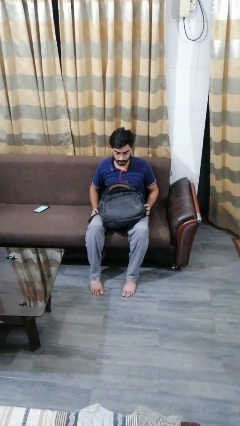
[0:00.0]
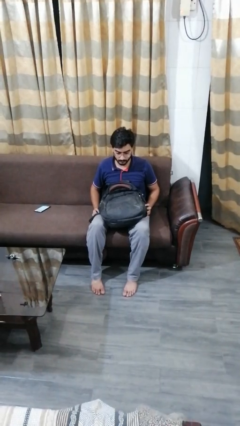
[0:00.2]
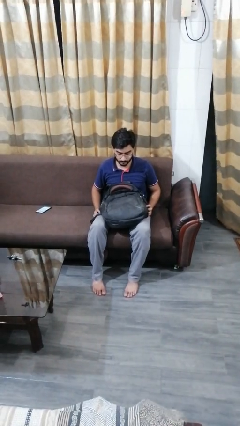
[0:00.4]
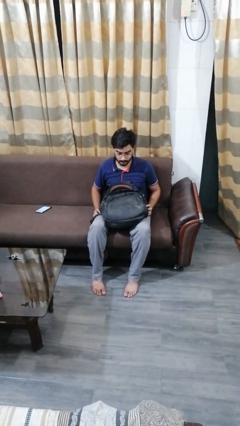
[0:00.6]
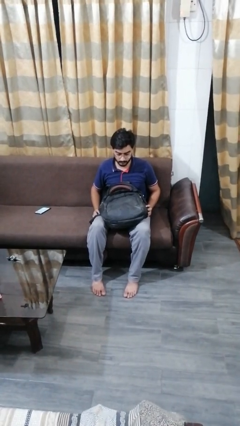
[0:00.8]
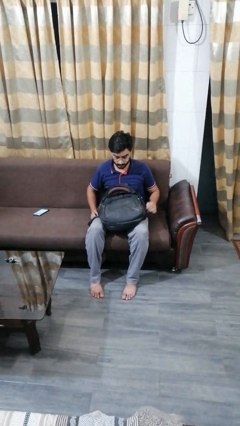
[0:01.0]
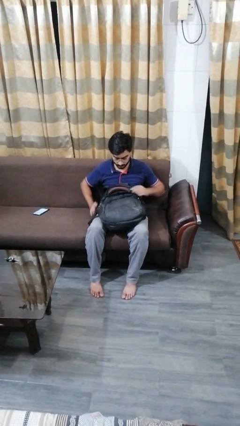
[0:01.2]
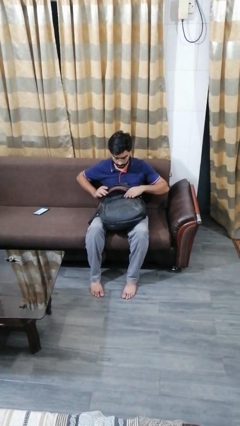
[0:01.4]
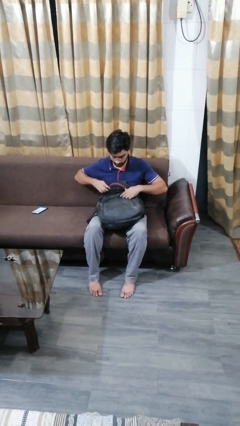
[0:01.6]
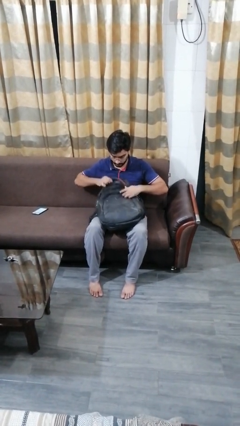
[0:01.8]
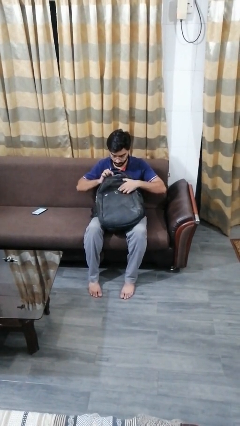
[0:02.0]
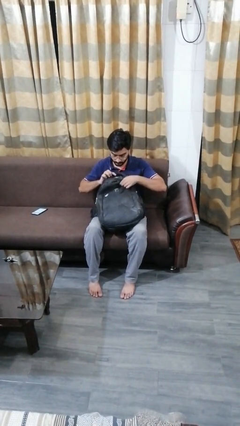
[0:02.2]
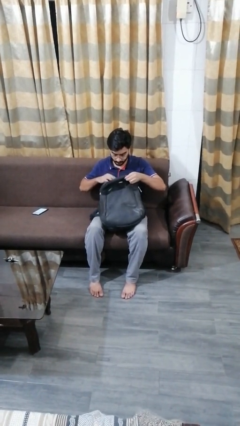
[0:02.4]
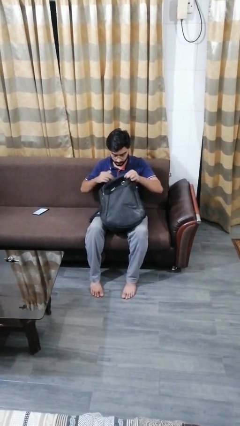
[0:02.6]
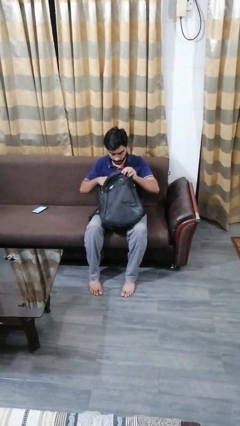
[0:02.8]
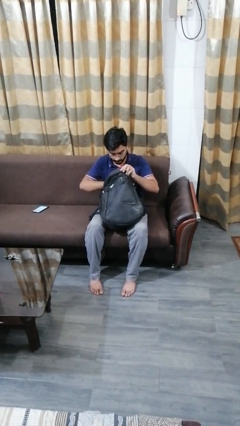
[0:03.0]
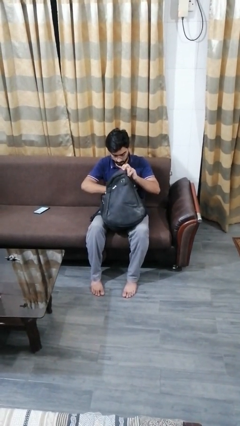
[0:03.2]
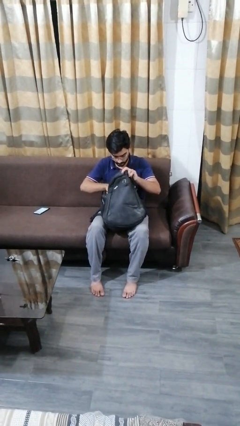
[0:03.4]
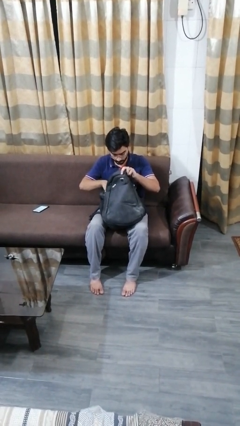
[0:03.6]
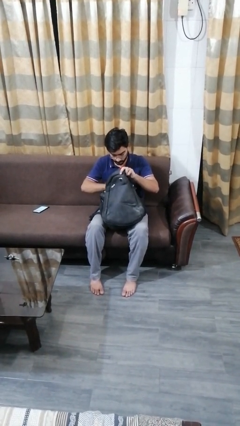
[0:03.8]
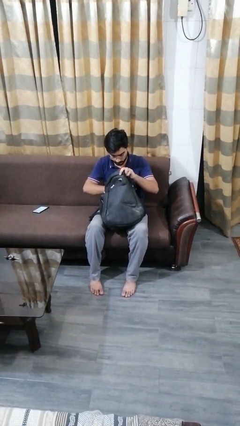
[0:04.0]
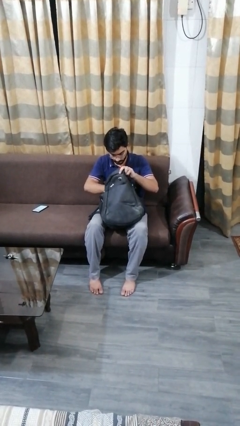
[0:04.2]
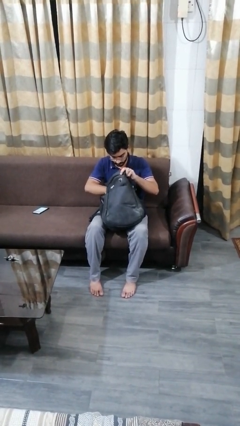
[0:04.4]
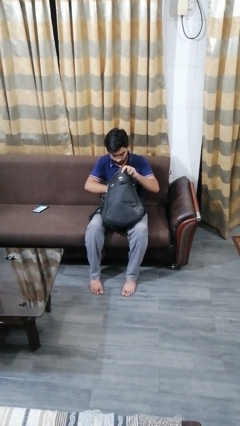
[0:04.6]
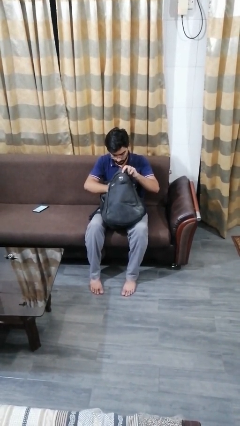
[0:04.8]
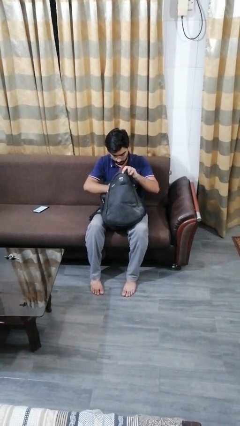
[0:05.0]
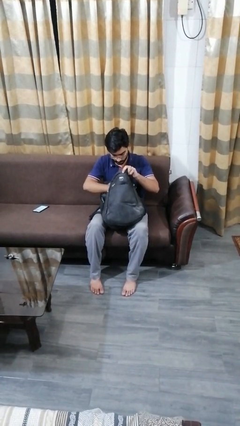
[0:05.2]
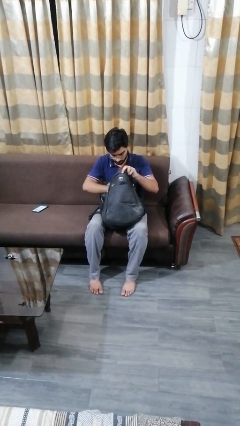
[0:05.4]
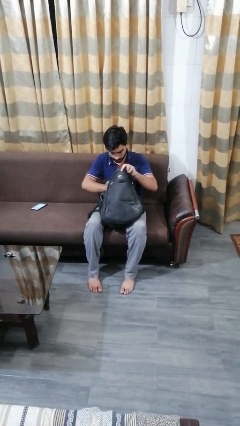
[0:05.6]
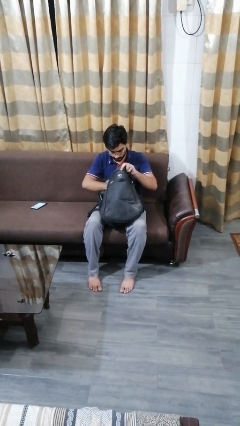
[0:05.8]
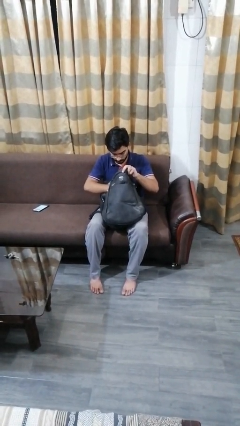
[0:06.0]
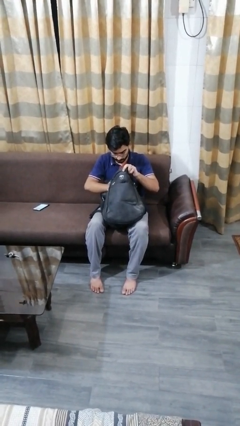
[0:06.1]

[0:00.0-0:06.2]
person searches in backpack

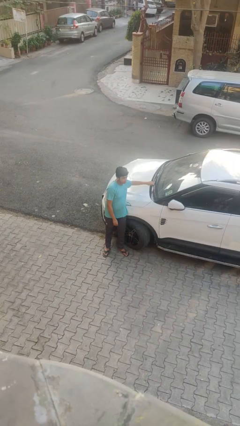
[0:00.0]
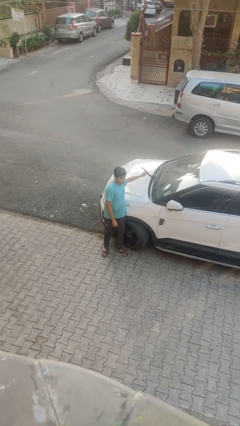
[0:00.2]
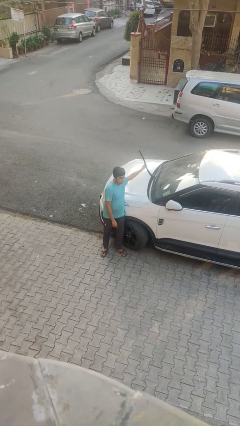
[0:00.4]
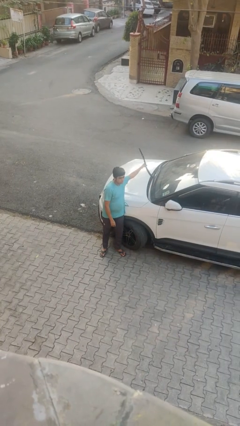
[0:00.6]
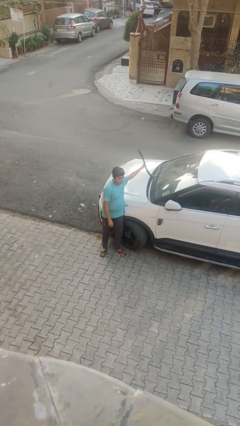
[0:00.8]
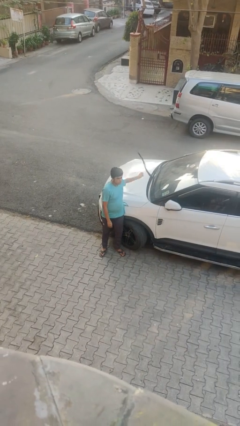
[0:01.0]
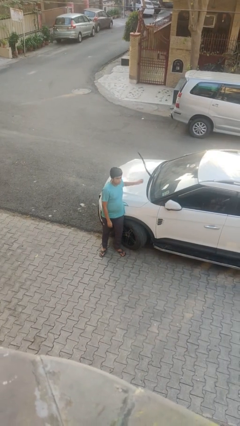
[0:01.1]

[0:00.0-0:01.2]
person flips up car wipers

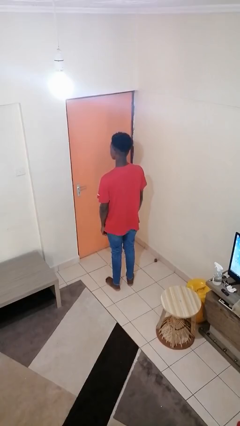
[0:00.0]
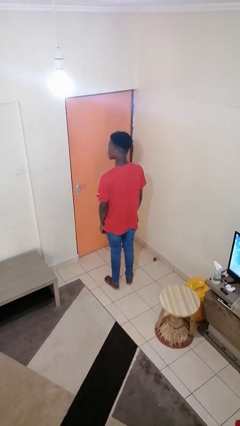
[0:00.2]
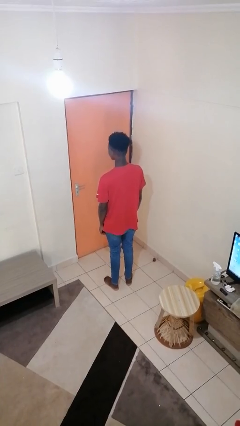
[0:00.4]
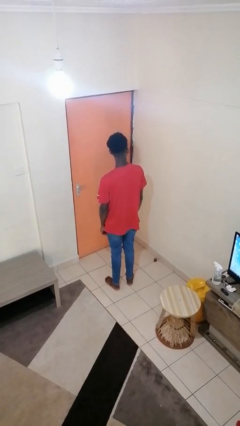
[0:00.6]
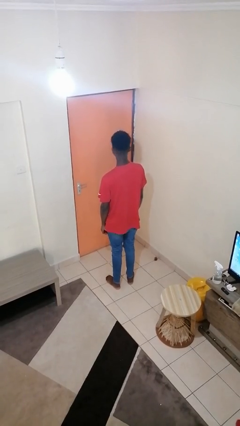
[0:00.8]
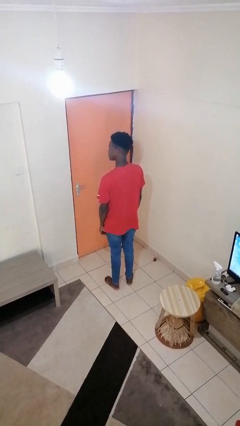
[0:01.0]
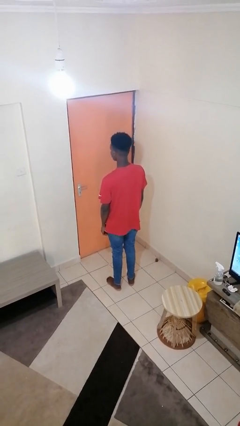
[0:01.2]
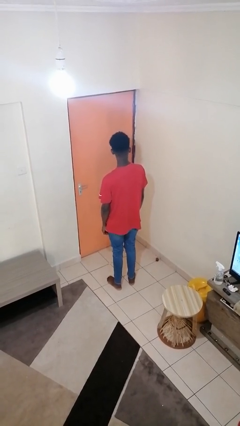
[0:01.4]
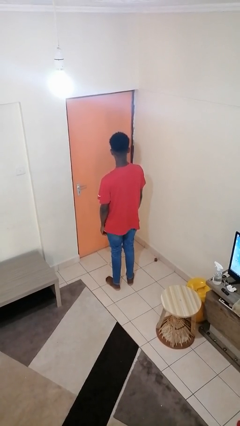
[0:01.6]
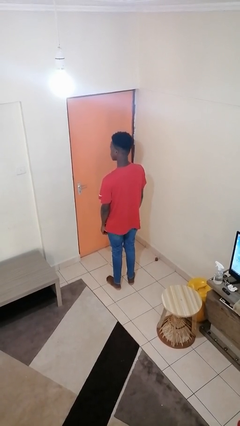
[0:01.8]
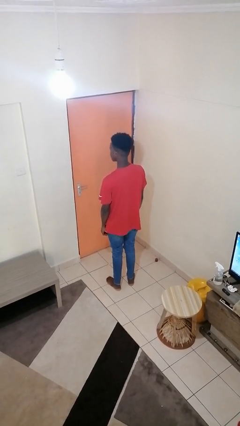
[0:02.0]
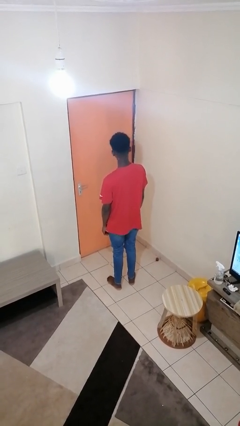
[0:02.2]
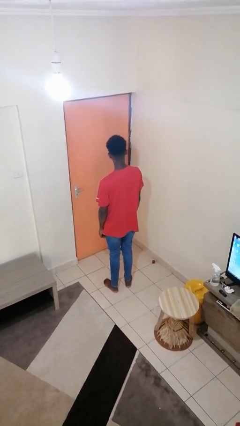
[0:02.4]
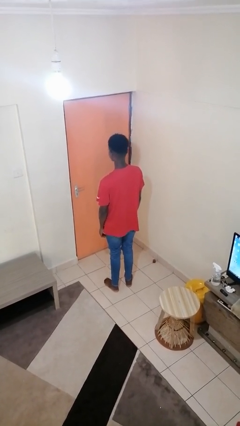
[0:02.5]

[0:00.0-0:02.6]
person shakes head

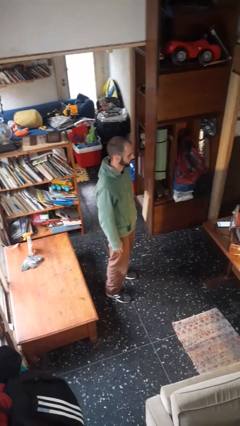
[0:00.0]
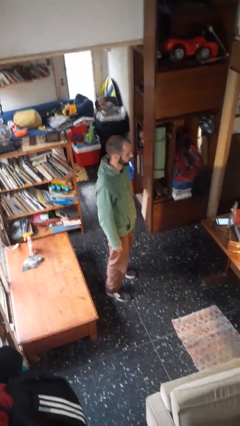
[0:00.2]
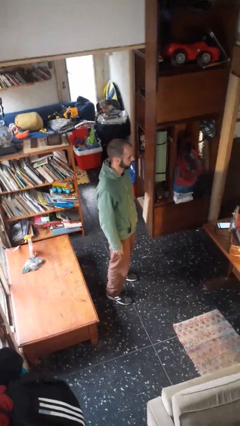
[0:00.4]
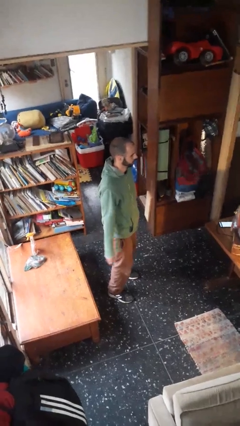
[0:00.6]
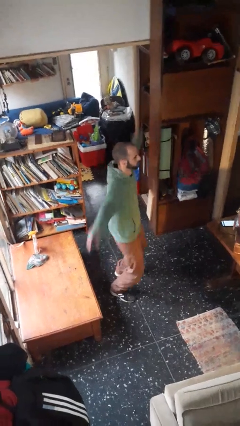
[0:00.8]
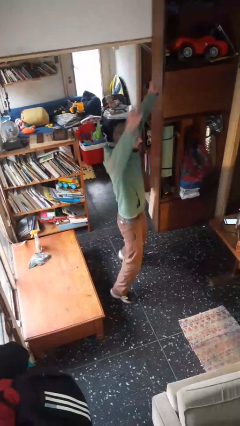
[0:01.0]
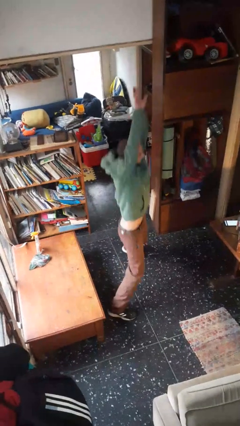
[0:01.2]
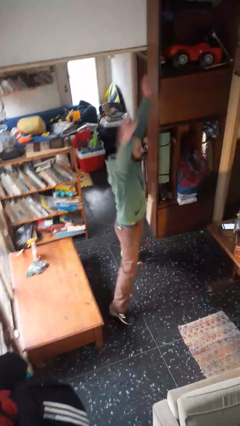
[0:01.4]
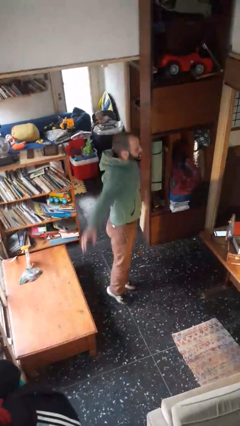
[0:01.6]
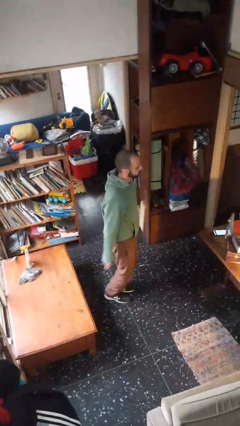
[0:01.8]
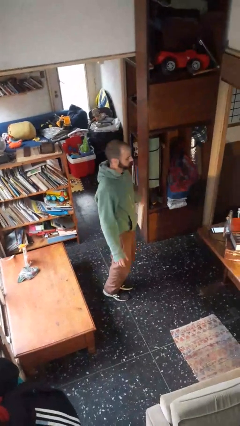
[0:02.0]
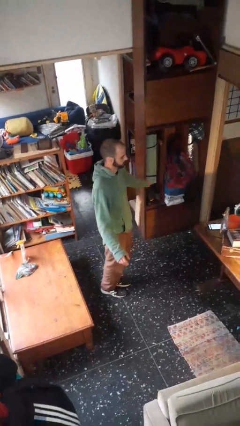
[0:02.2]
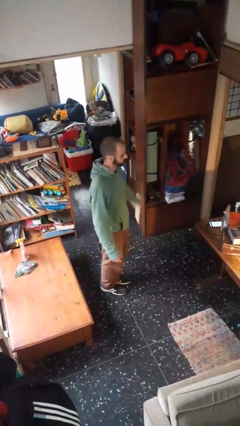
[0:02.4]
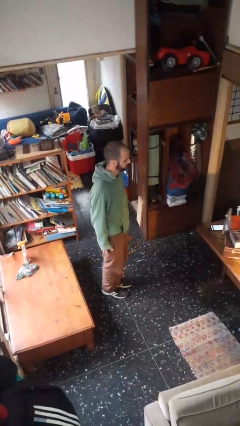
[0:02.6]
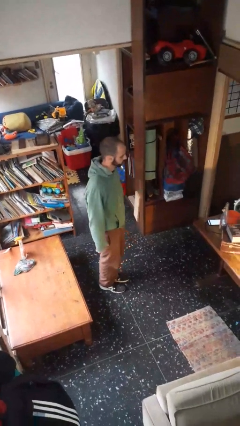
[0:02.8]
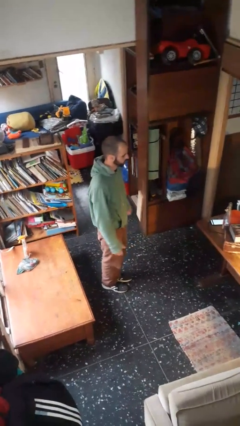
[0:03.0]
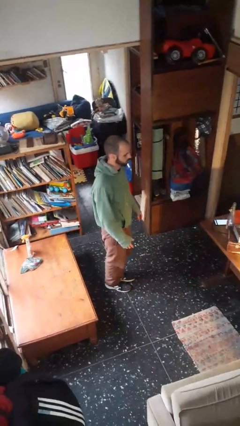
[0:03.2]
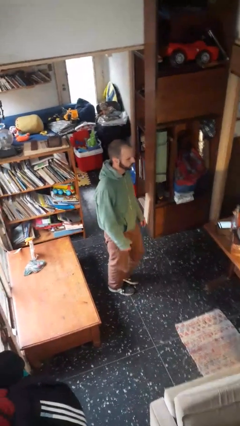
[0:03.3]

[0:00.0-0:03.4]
person exercises with jumping jacks

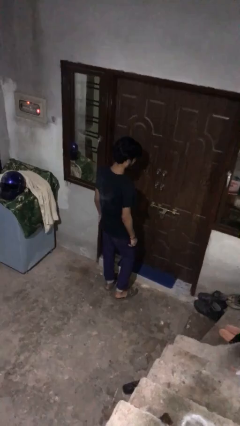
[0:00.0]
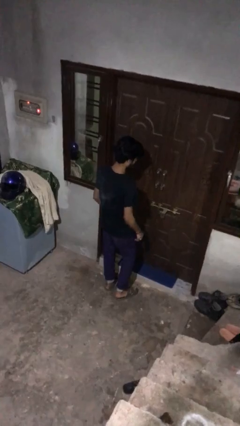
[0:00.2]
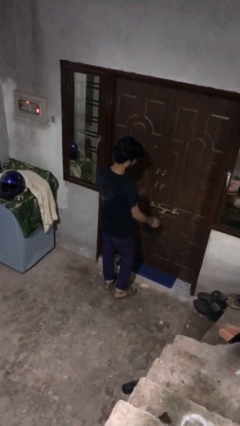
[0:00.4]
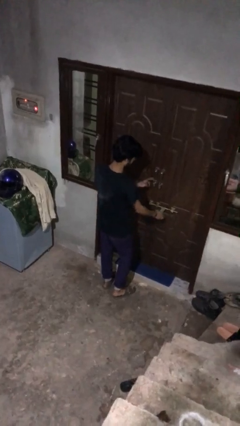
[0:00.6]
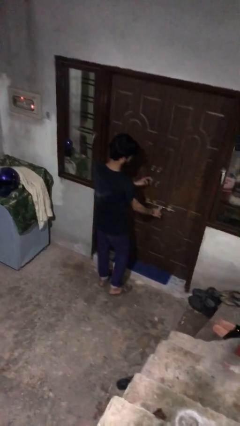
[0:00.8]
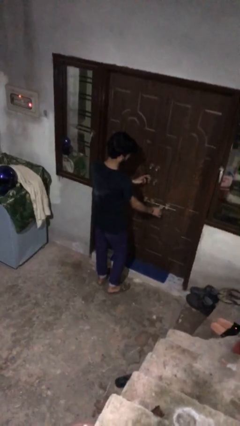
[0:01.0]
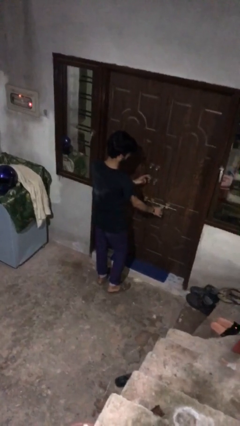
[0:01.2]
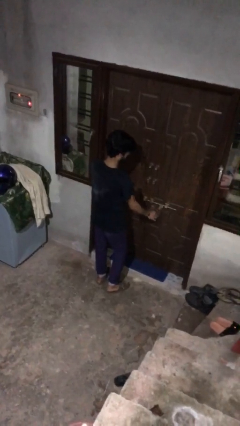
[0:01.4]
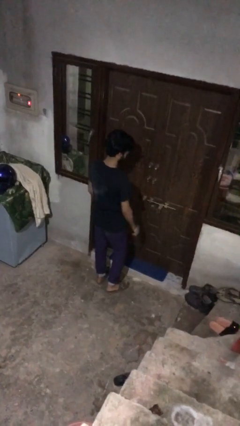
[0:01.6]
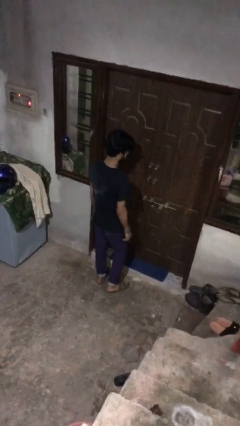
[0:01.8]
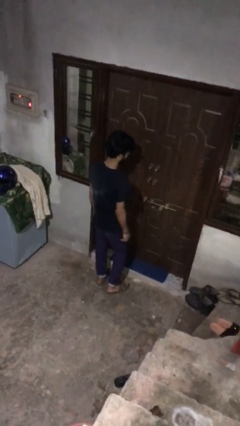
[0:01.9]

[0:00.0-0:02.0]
person unlocks door with keys

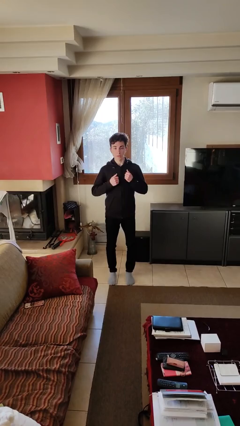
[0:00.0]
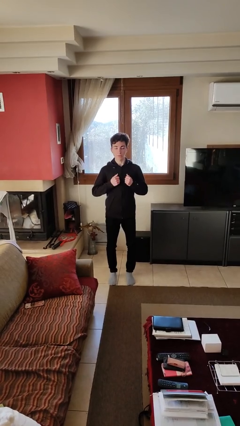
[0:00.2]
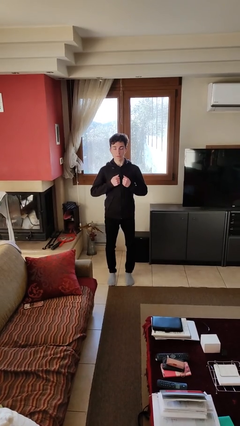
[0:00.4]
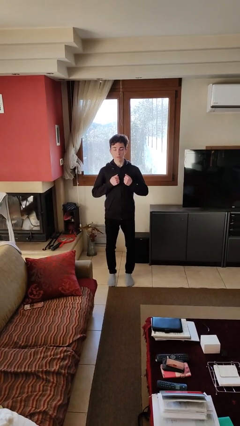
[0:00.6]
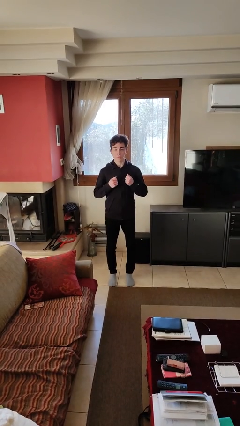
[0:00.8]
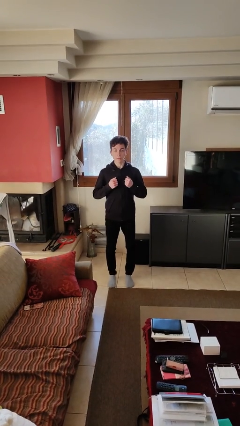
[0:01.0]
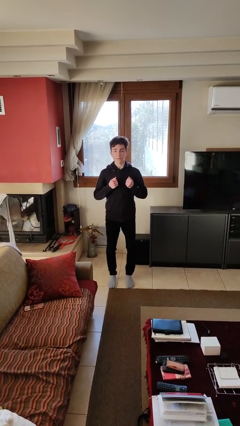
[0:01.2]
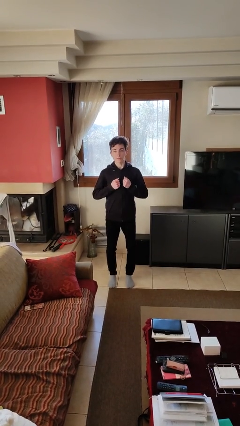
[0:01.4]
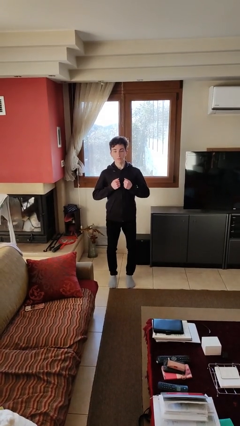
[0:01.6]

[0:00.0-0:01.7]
person drums on chest
